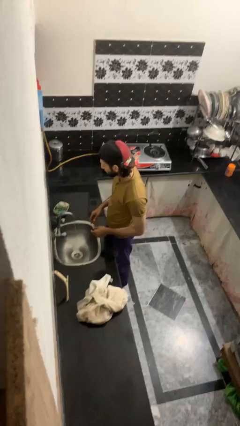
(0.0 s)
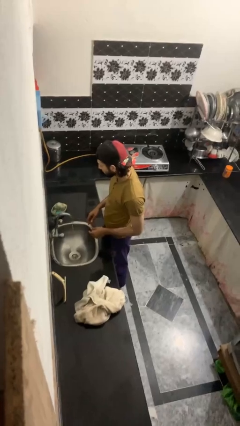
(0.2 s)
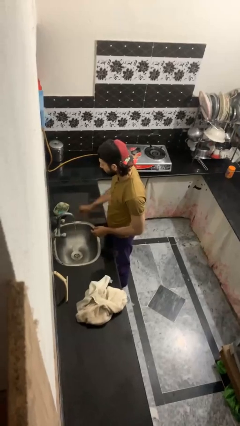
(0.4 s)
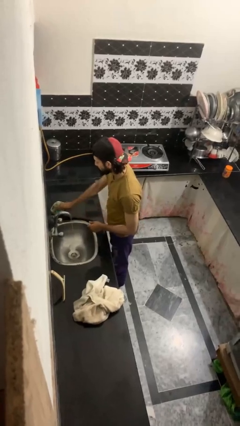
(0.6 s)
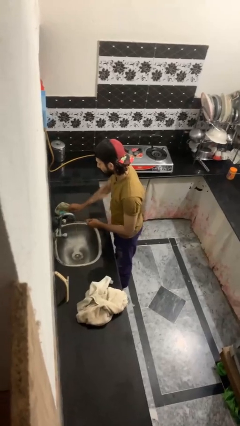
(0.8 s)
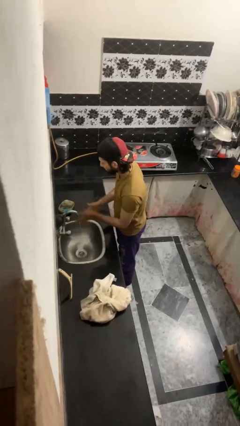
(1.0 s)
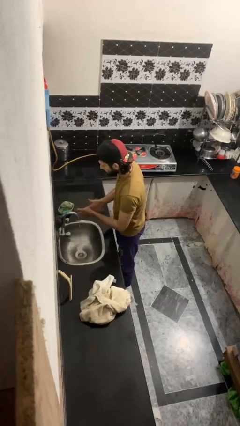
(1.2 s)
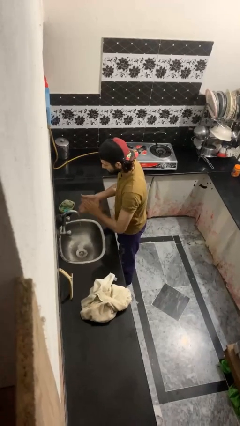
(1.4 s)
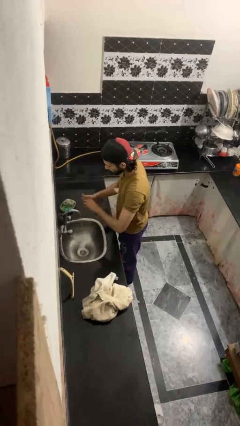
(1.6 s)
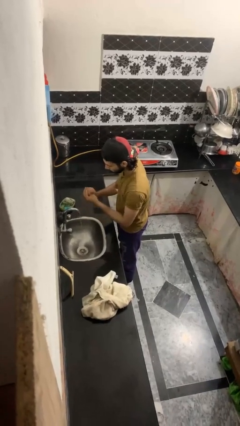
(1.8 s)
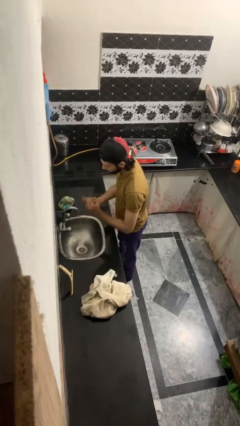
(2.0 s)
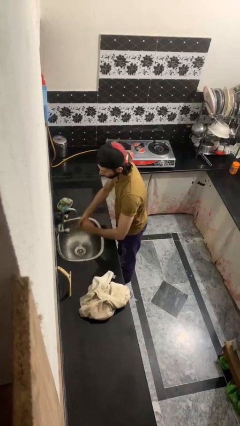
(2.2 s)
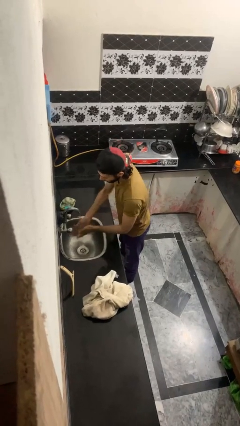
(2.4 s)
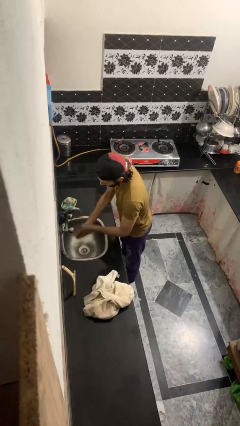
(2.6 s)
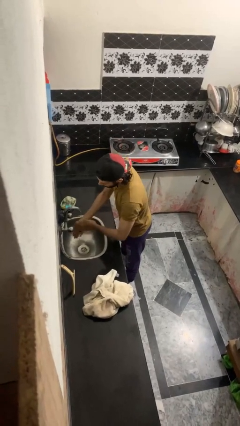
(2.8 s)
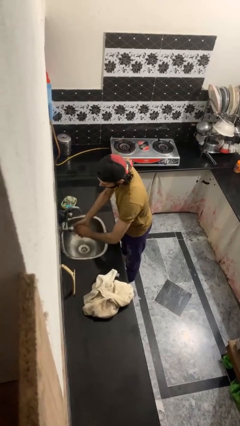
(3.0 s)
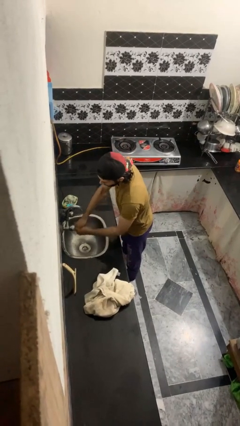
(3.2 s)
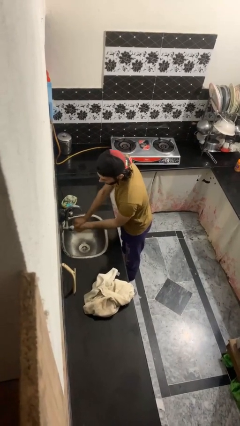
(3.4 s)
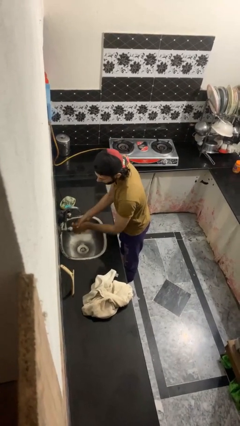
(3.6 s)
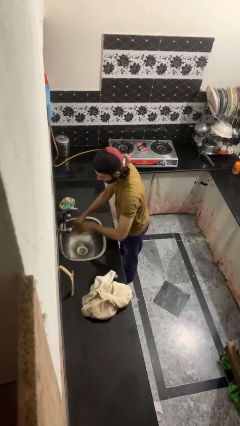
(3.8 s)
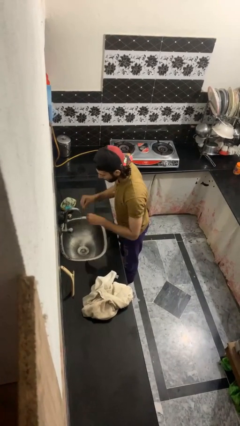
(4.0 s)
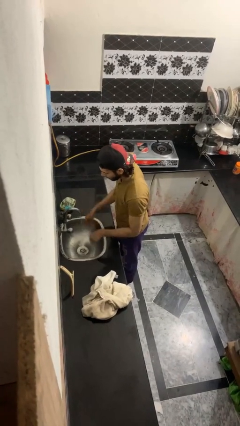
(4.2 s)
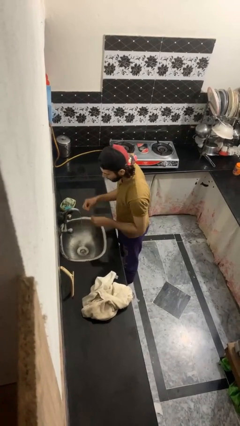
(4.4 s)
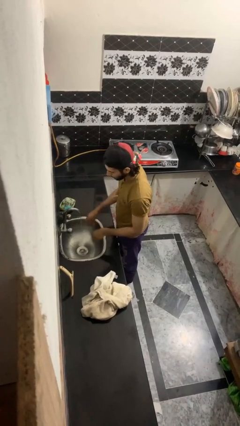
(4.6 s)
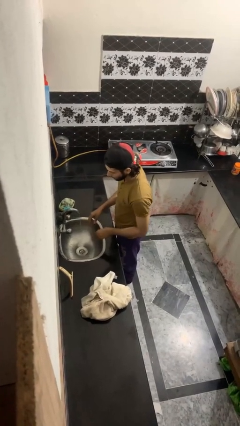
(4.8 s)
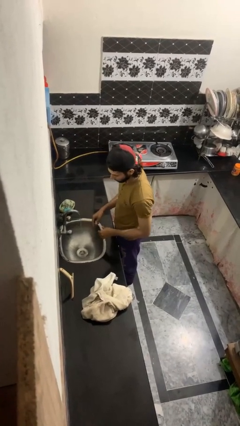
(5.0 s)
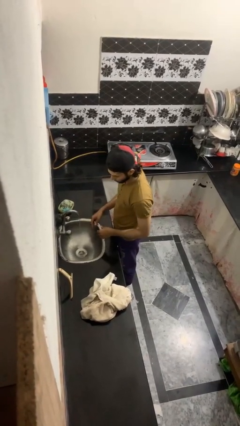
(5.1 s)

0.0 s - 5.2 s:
person washes hands

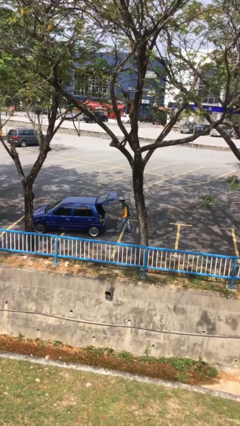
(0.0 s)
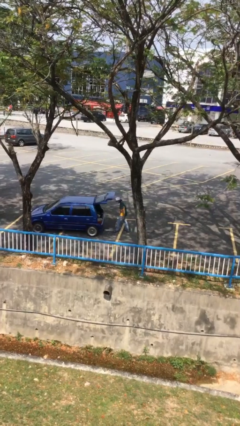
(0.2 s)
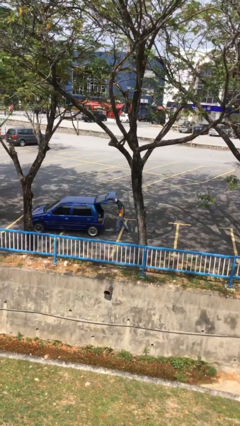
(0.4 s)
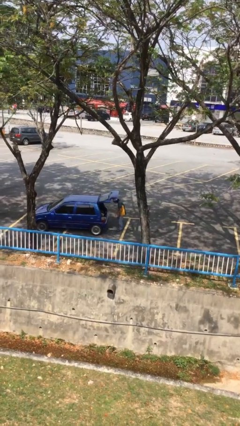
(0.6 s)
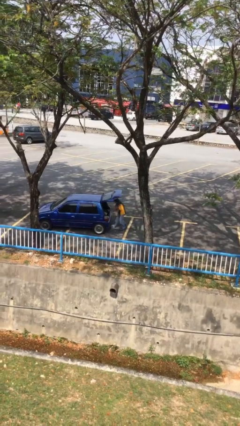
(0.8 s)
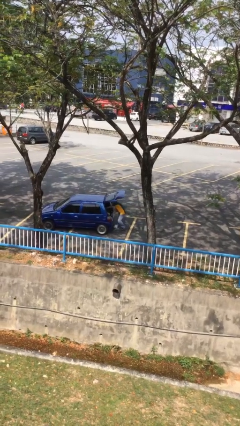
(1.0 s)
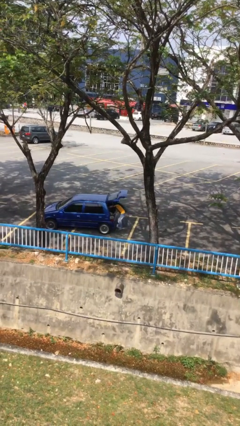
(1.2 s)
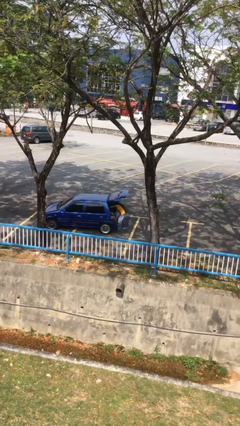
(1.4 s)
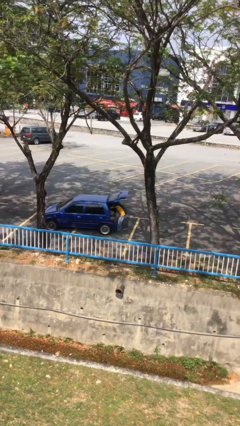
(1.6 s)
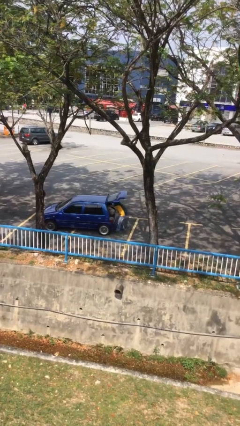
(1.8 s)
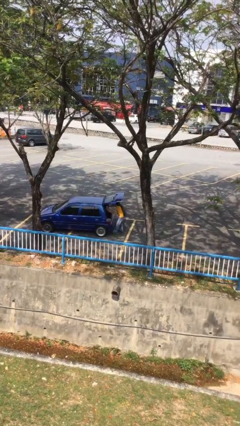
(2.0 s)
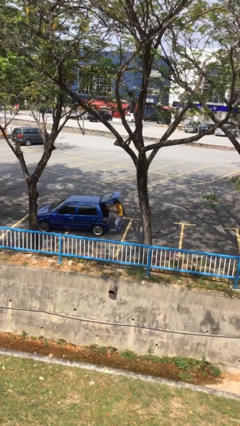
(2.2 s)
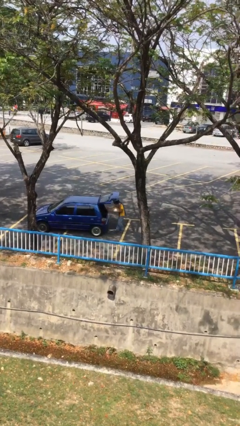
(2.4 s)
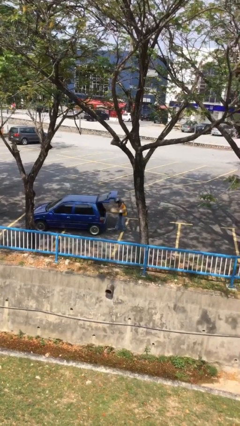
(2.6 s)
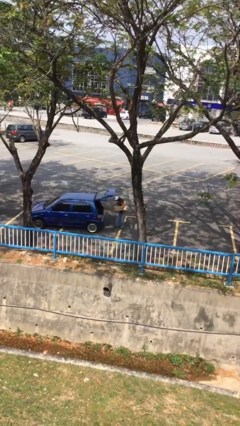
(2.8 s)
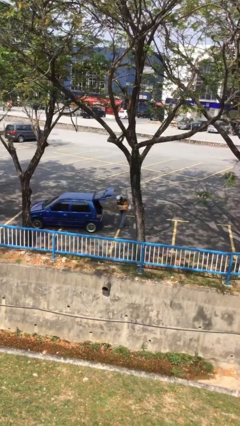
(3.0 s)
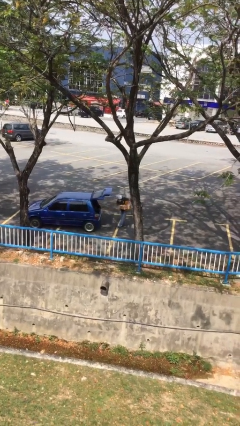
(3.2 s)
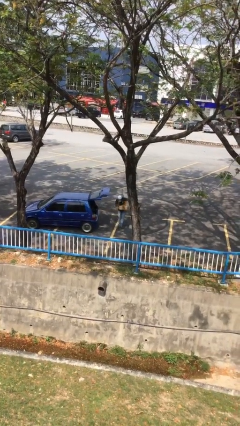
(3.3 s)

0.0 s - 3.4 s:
person unloads car

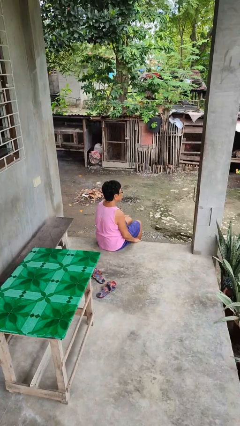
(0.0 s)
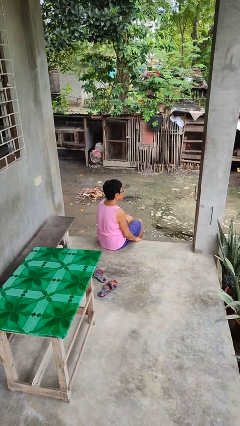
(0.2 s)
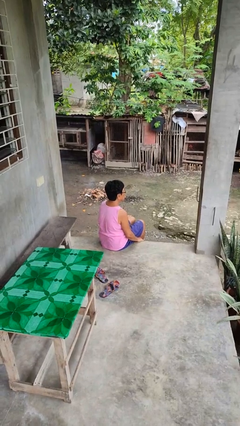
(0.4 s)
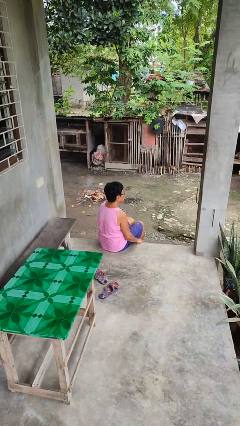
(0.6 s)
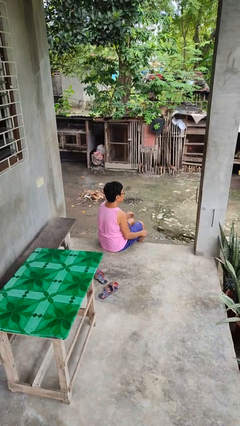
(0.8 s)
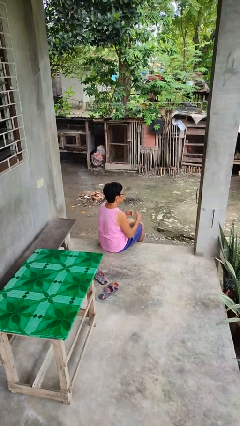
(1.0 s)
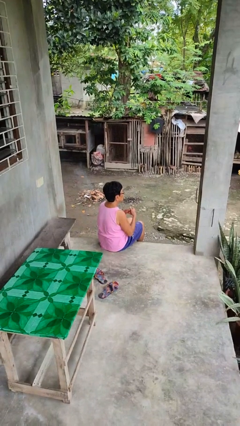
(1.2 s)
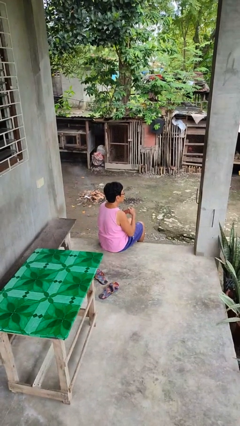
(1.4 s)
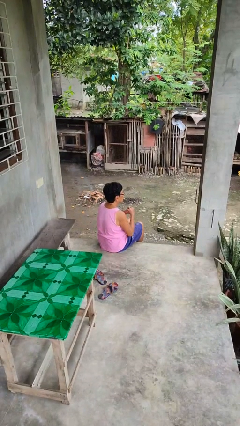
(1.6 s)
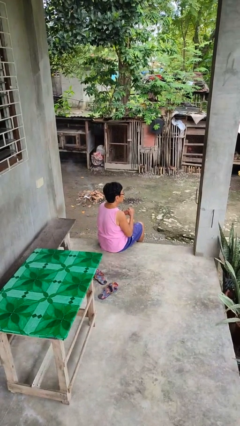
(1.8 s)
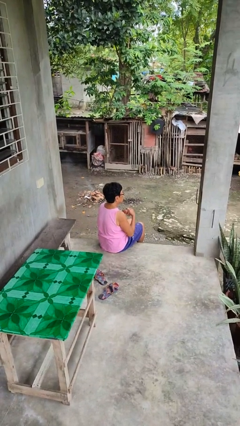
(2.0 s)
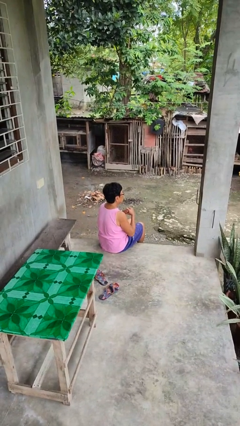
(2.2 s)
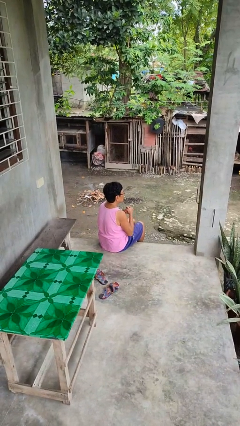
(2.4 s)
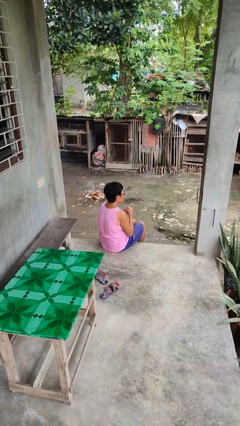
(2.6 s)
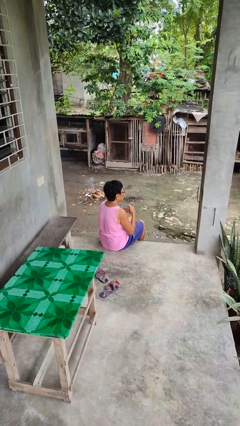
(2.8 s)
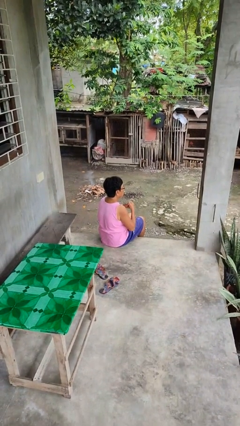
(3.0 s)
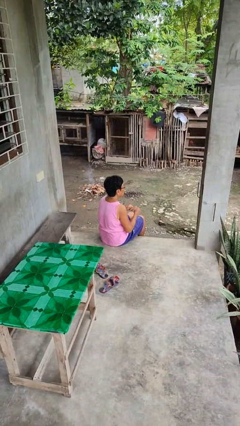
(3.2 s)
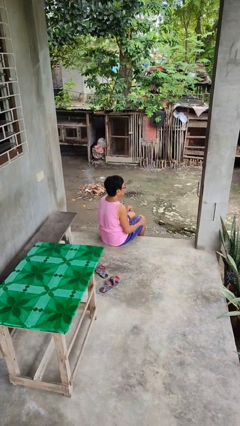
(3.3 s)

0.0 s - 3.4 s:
person cracks knuckles

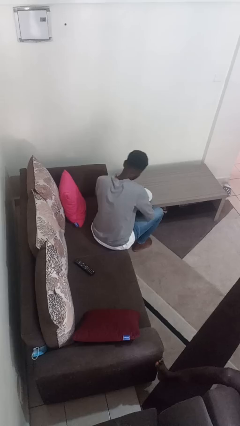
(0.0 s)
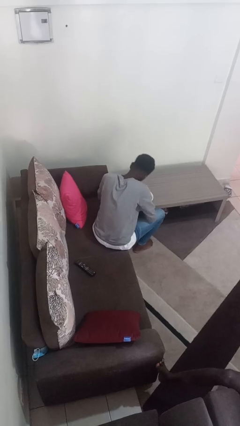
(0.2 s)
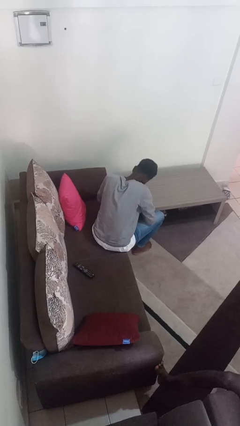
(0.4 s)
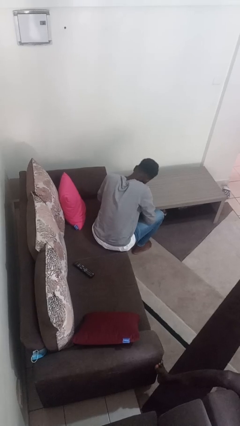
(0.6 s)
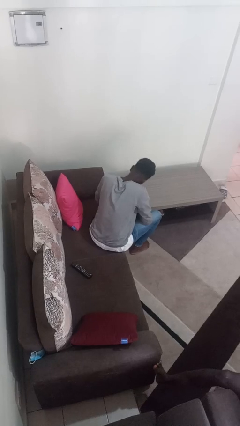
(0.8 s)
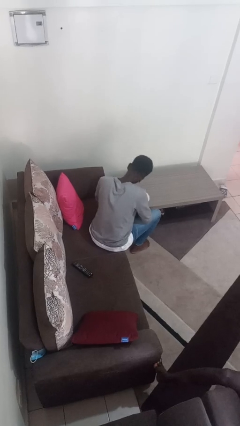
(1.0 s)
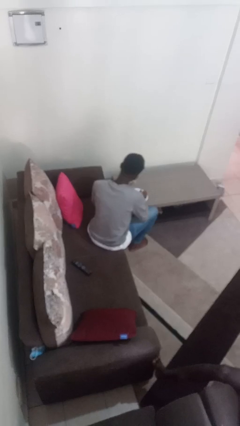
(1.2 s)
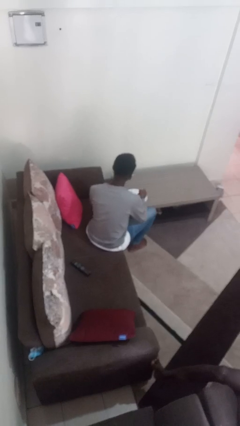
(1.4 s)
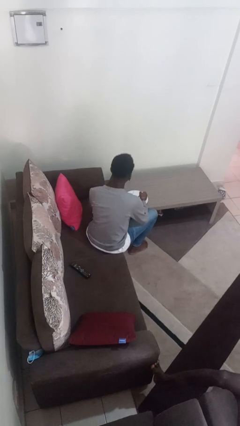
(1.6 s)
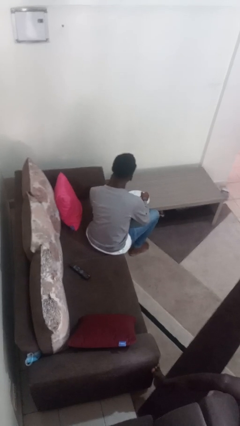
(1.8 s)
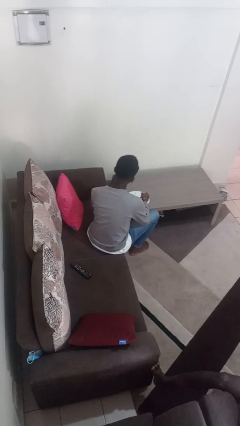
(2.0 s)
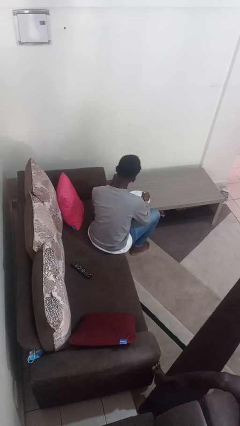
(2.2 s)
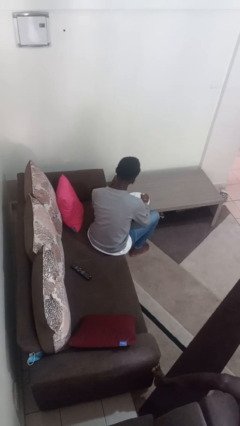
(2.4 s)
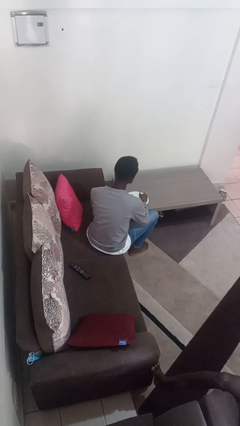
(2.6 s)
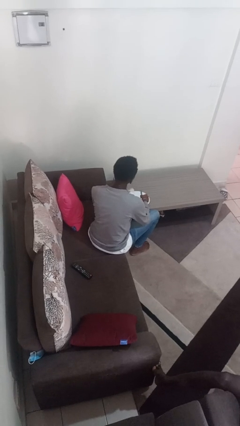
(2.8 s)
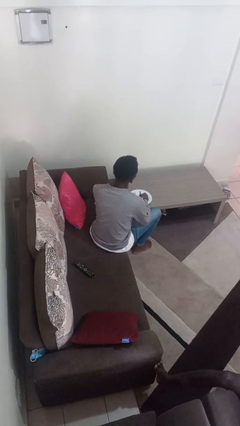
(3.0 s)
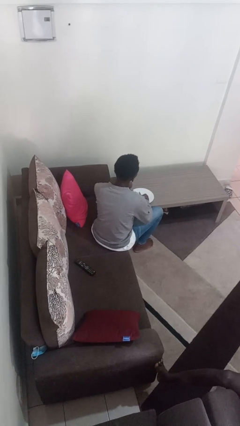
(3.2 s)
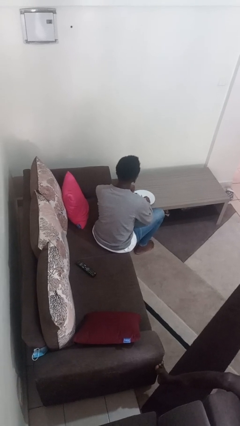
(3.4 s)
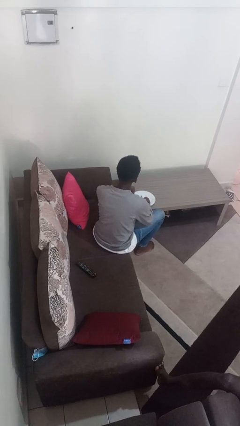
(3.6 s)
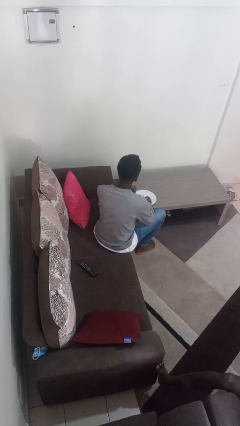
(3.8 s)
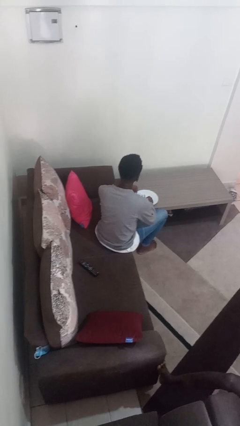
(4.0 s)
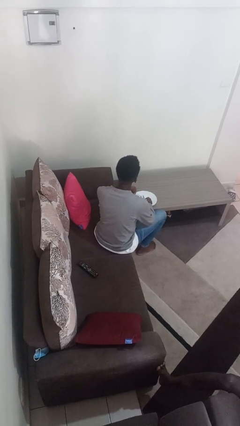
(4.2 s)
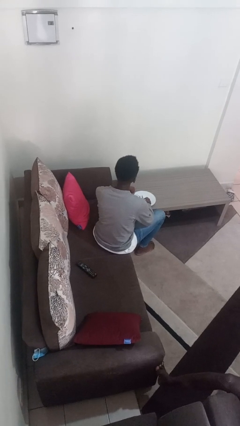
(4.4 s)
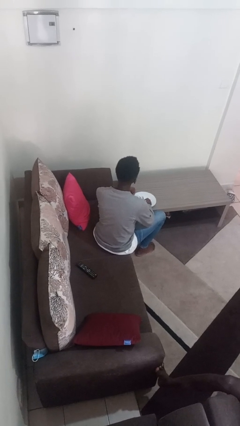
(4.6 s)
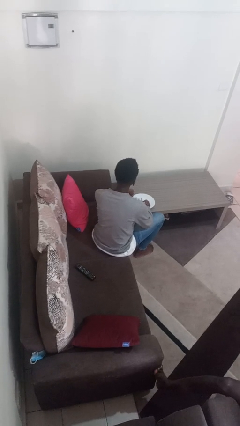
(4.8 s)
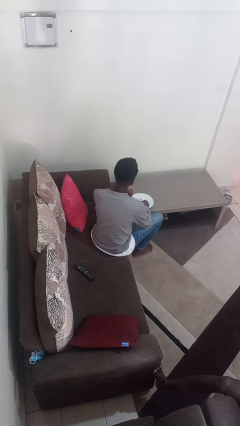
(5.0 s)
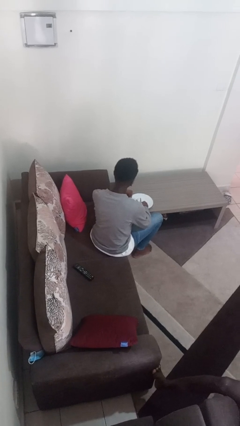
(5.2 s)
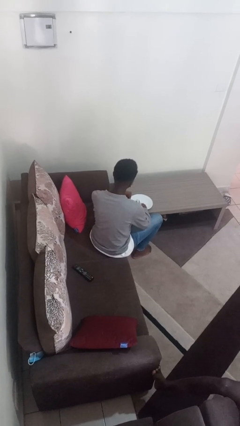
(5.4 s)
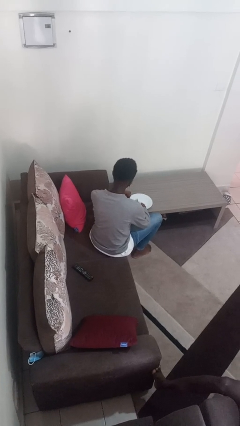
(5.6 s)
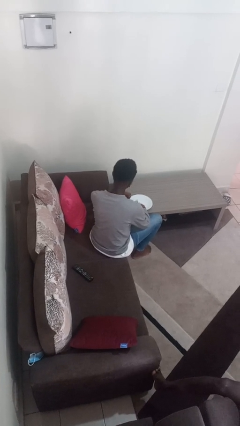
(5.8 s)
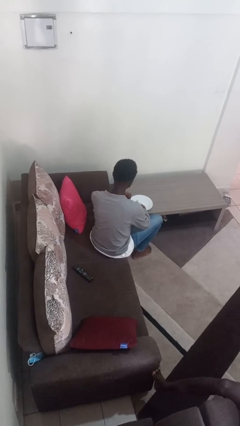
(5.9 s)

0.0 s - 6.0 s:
person eats with utensil
